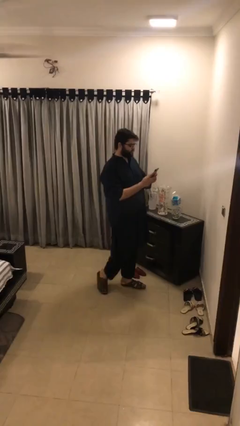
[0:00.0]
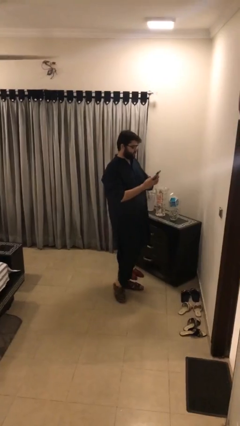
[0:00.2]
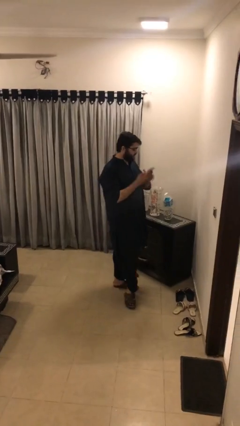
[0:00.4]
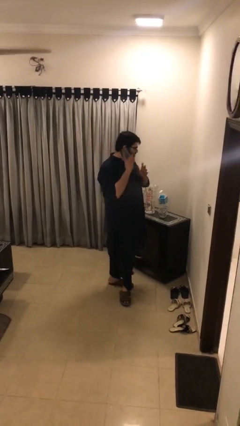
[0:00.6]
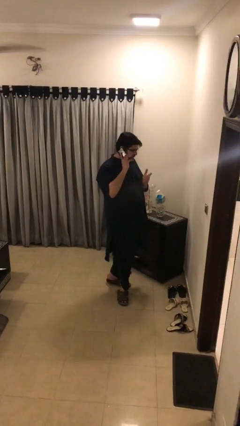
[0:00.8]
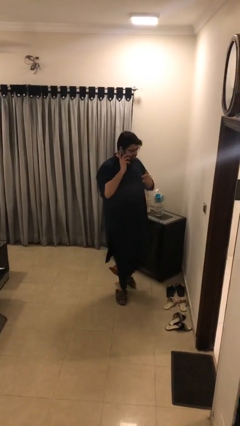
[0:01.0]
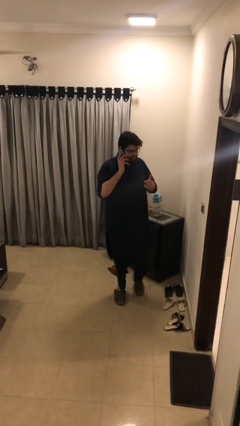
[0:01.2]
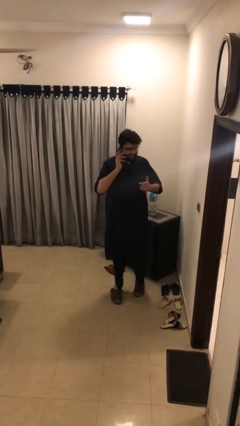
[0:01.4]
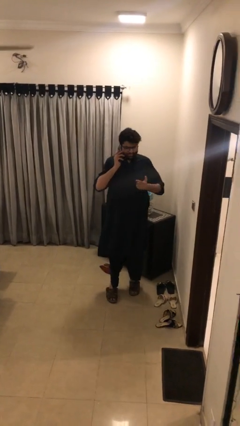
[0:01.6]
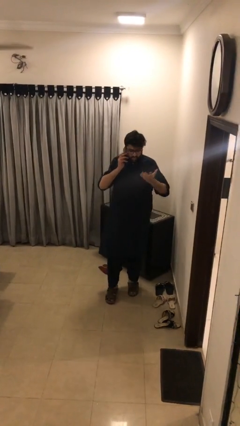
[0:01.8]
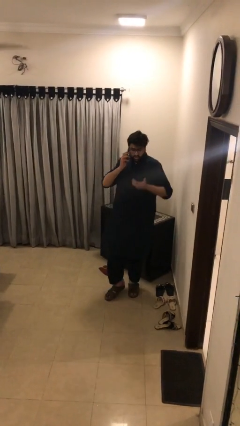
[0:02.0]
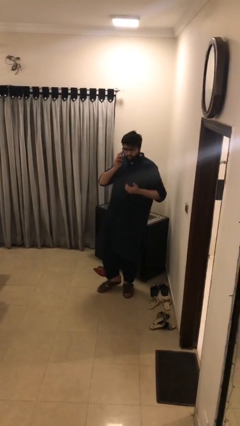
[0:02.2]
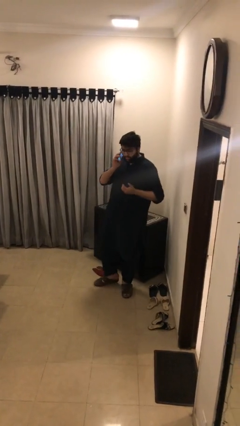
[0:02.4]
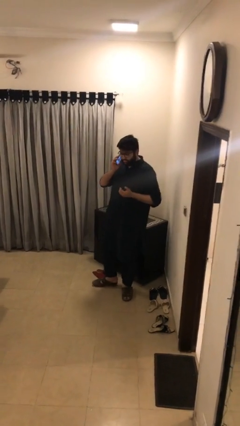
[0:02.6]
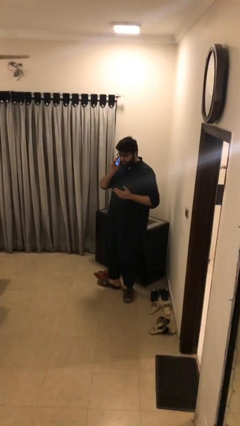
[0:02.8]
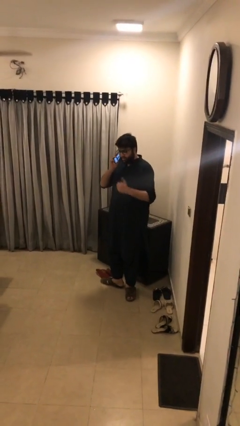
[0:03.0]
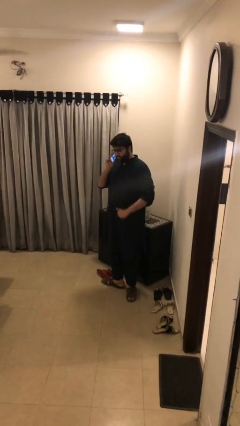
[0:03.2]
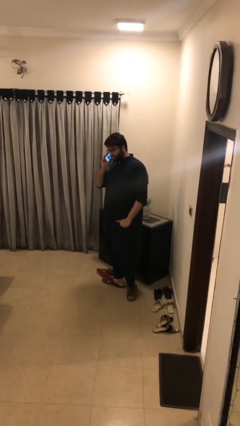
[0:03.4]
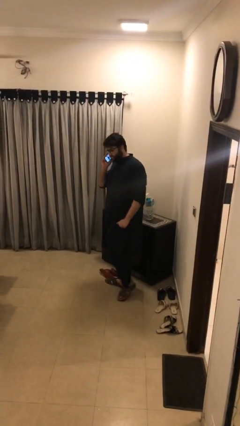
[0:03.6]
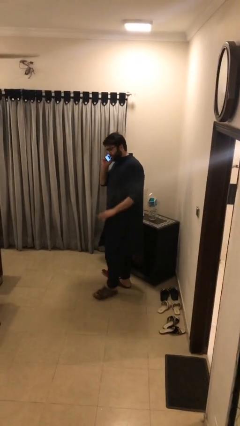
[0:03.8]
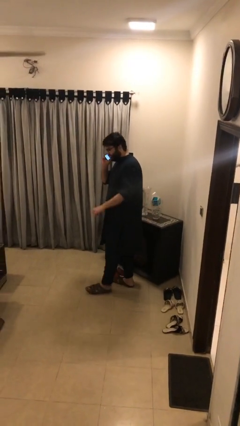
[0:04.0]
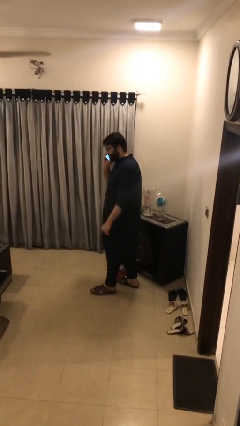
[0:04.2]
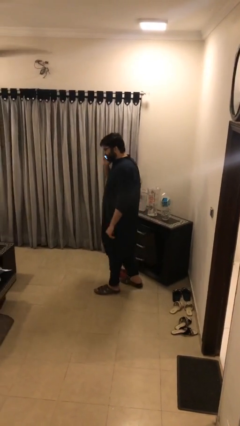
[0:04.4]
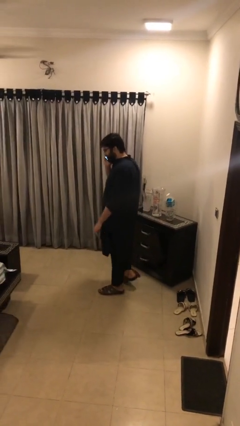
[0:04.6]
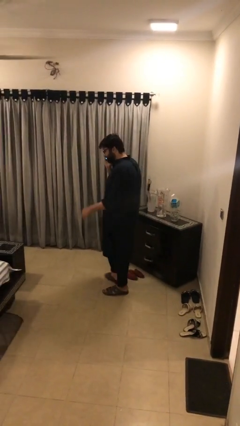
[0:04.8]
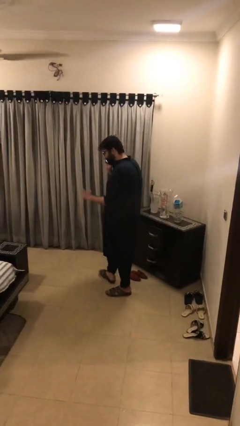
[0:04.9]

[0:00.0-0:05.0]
person talks on phone

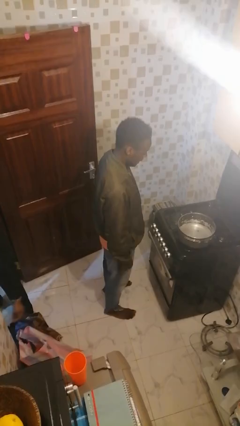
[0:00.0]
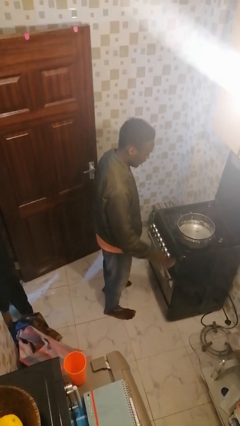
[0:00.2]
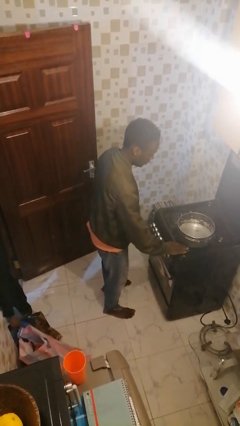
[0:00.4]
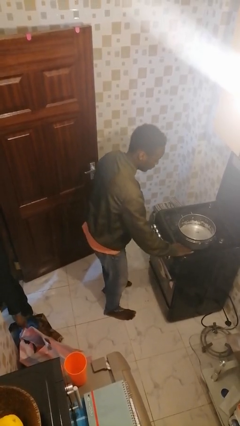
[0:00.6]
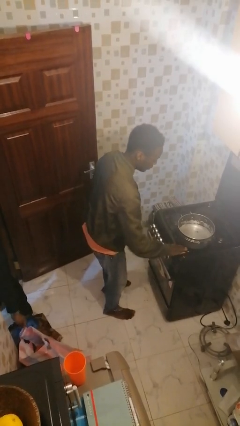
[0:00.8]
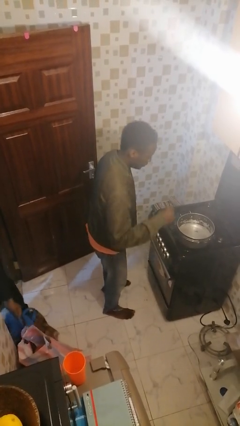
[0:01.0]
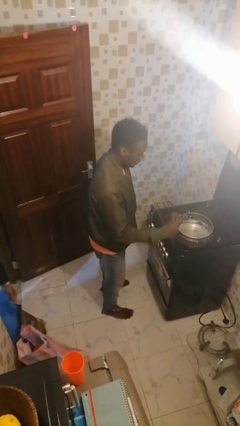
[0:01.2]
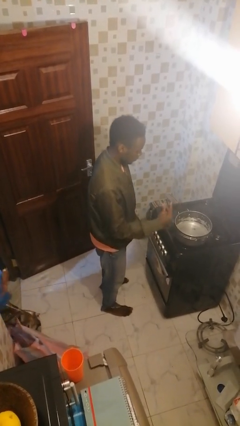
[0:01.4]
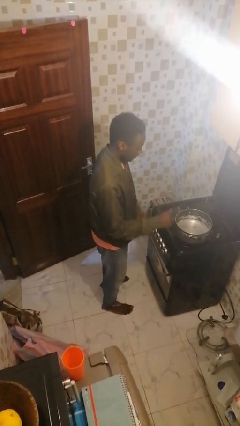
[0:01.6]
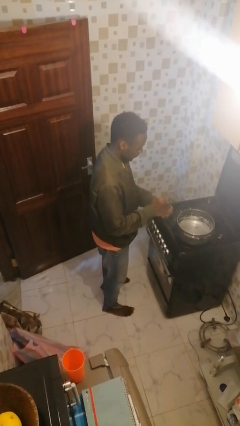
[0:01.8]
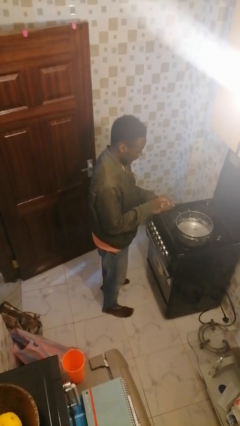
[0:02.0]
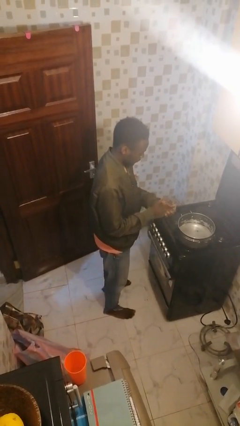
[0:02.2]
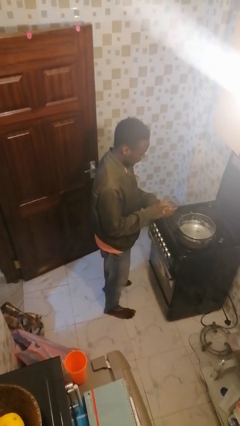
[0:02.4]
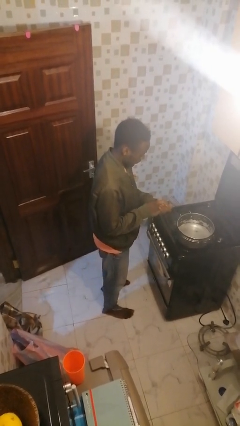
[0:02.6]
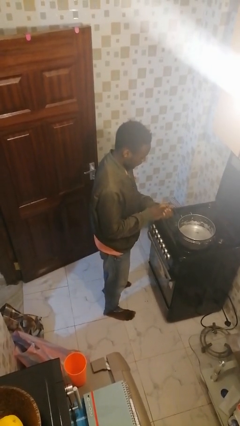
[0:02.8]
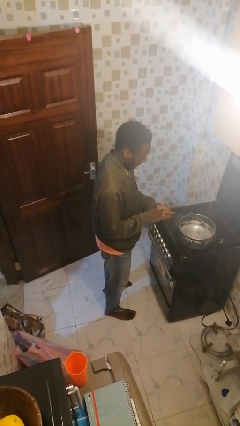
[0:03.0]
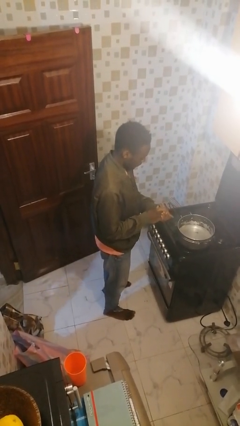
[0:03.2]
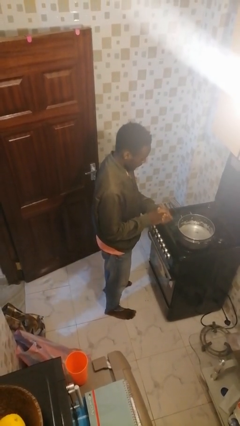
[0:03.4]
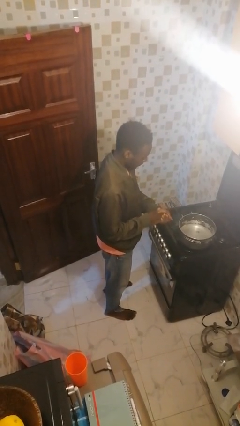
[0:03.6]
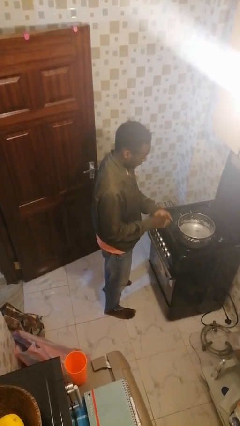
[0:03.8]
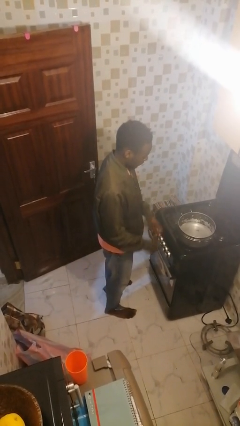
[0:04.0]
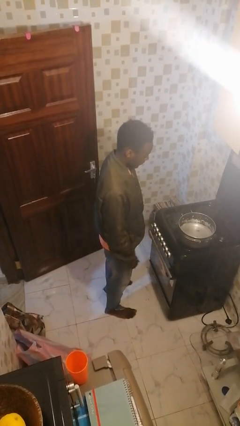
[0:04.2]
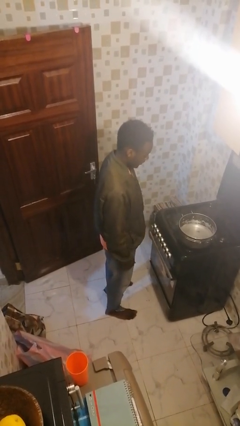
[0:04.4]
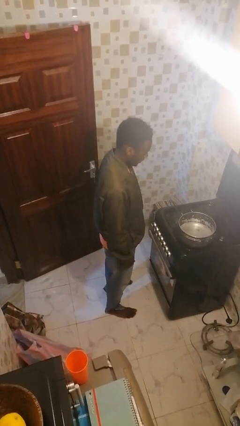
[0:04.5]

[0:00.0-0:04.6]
person burns hand

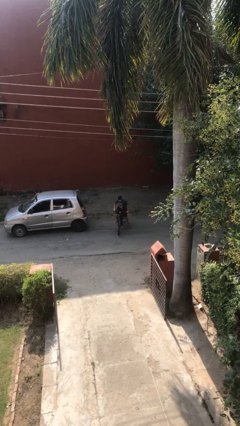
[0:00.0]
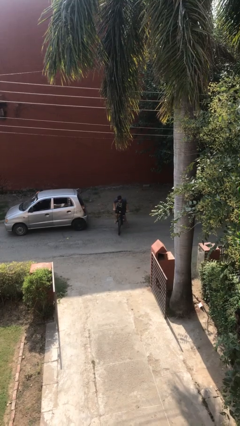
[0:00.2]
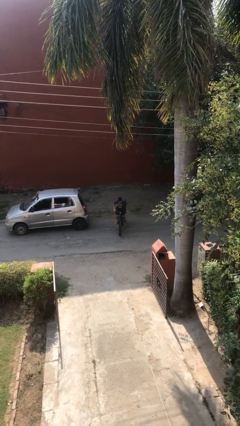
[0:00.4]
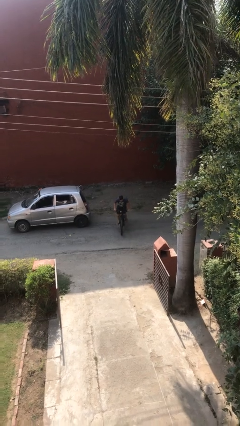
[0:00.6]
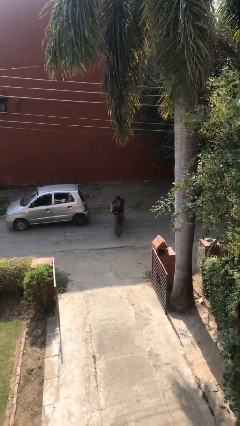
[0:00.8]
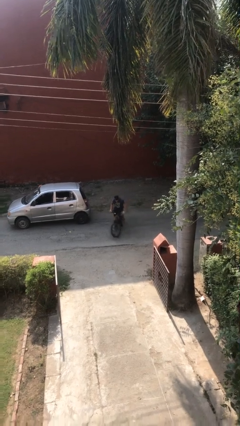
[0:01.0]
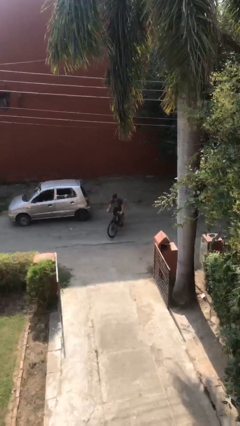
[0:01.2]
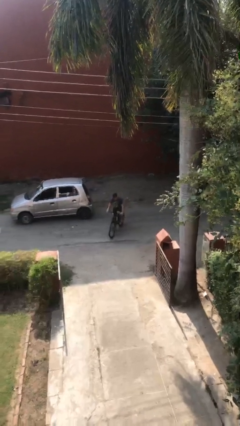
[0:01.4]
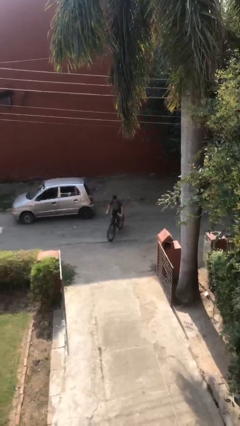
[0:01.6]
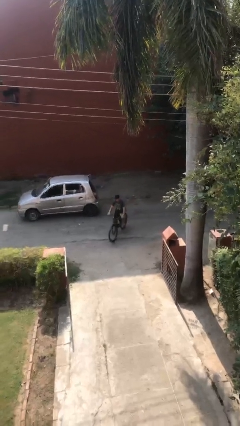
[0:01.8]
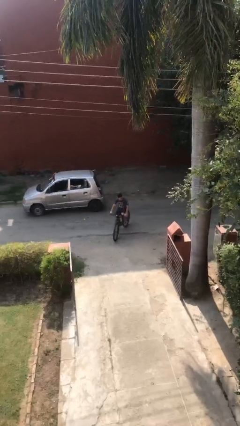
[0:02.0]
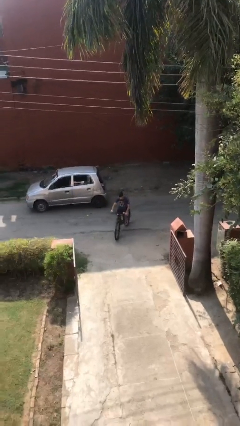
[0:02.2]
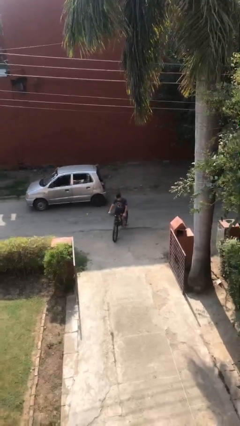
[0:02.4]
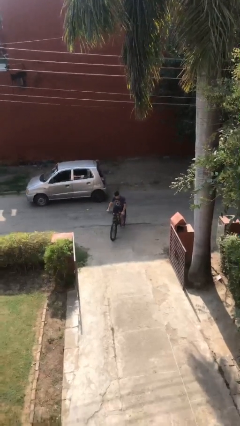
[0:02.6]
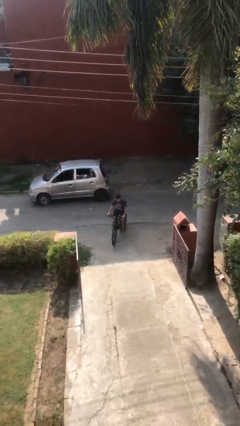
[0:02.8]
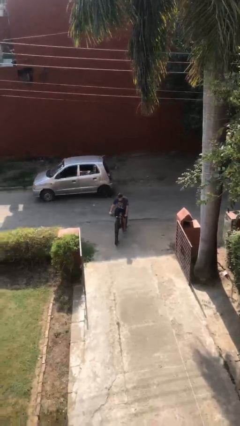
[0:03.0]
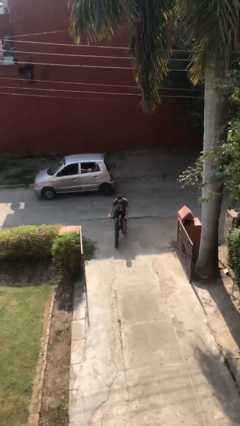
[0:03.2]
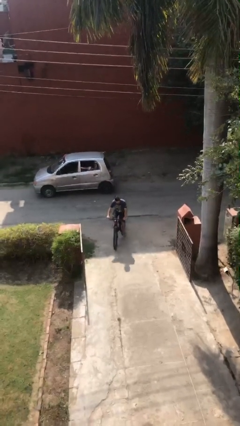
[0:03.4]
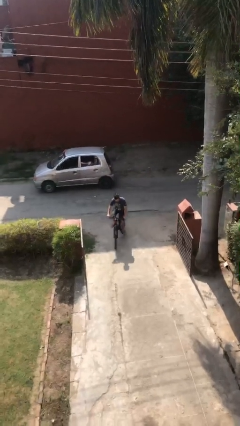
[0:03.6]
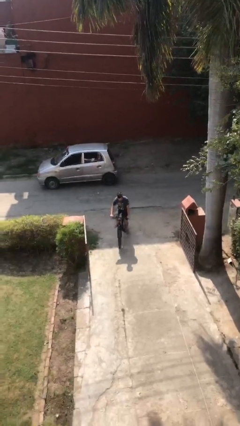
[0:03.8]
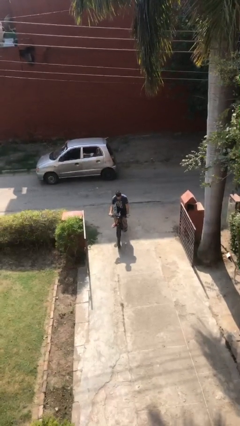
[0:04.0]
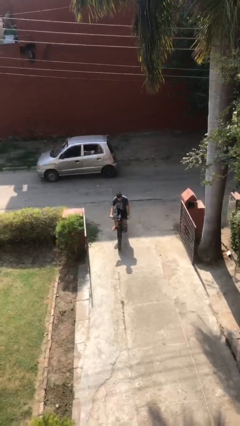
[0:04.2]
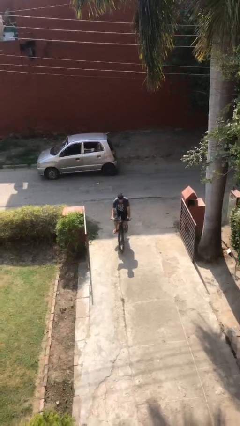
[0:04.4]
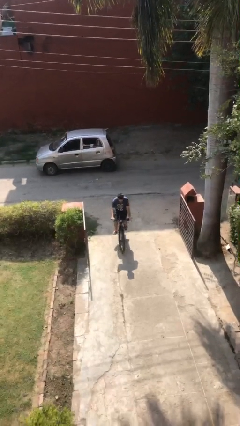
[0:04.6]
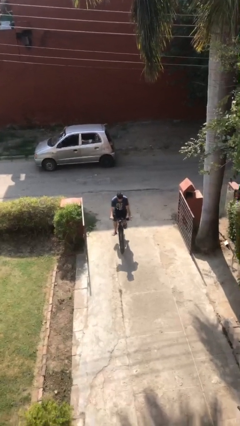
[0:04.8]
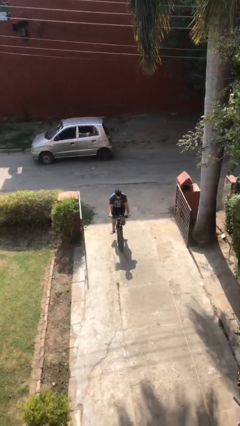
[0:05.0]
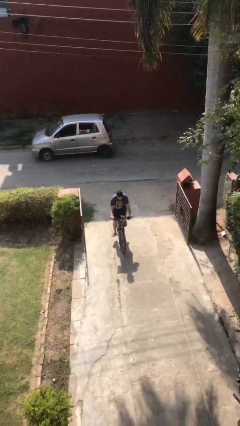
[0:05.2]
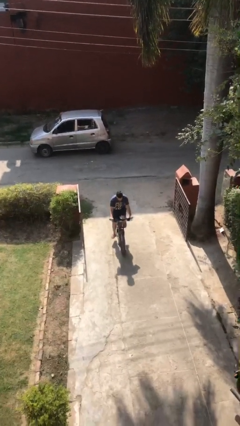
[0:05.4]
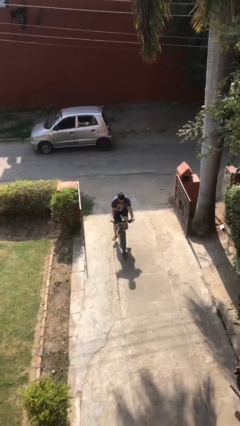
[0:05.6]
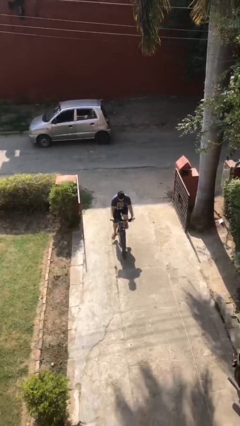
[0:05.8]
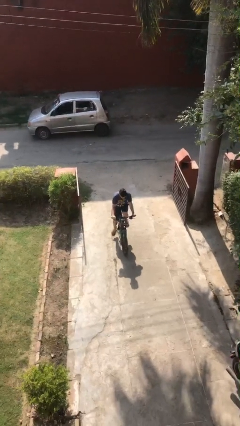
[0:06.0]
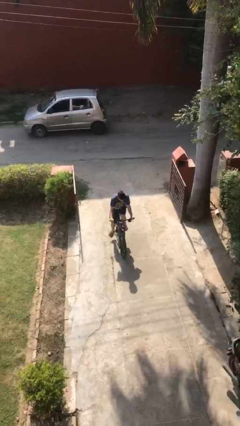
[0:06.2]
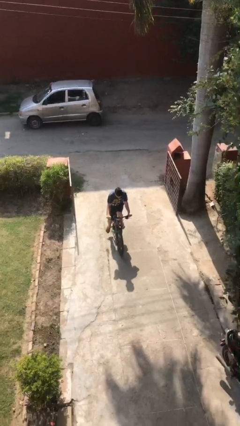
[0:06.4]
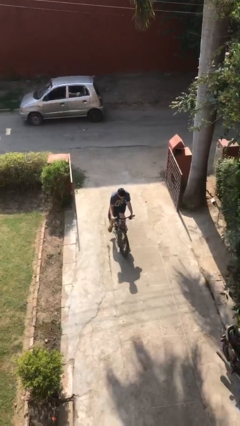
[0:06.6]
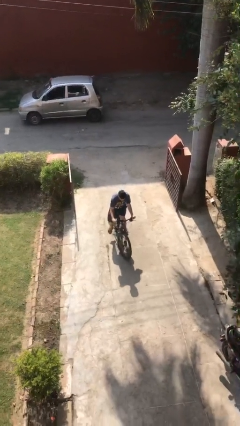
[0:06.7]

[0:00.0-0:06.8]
person rides bicycle

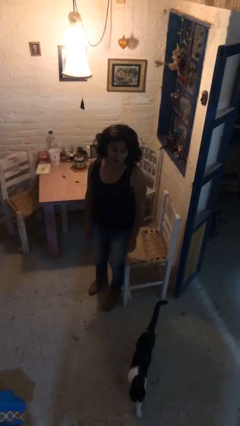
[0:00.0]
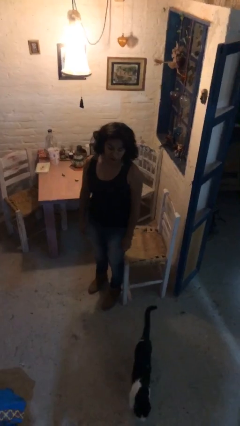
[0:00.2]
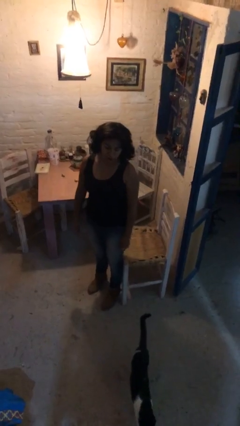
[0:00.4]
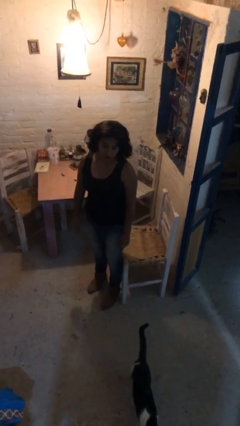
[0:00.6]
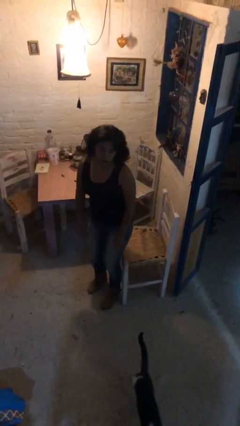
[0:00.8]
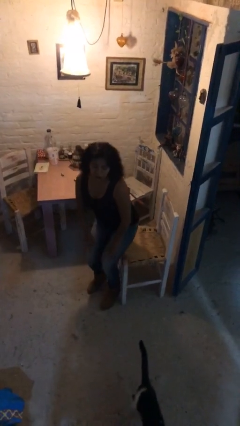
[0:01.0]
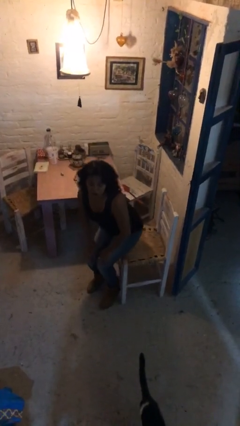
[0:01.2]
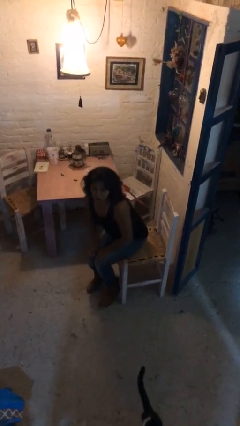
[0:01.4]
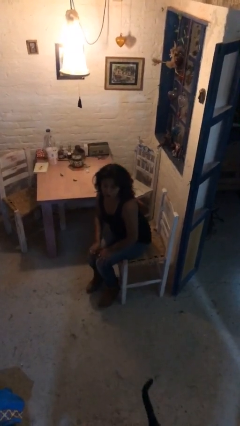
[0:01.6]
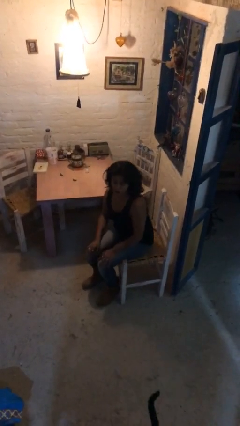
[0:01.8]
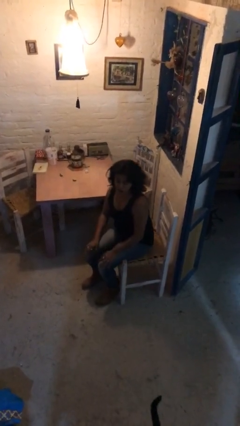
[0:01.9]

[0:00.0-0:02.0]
person sits down
